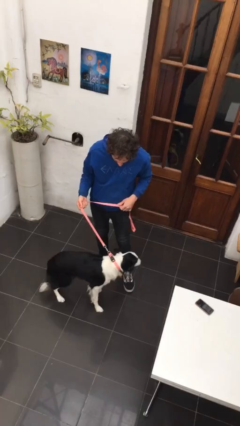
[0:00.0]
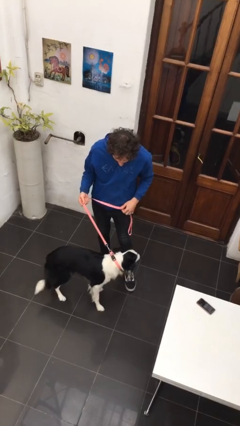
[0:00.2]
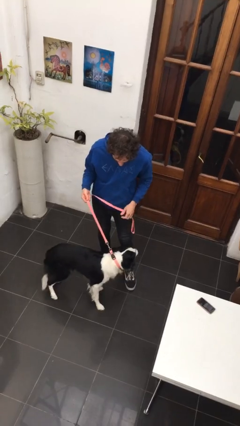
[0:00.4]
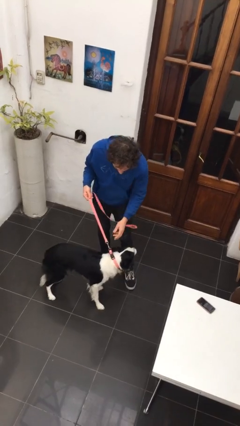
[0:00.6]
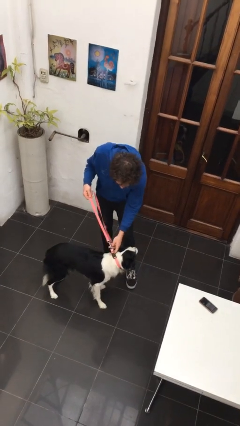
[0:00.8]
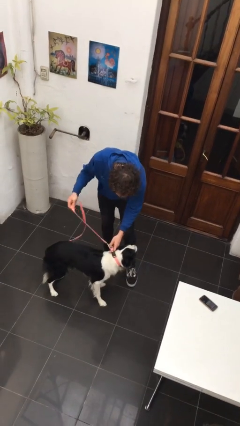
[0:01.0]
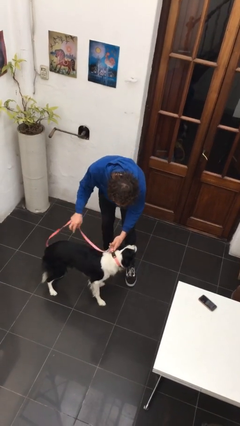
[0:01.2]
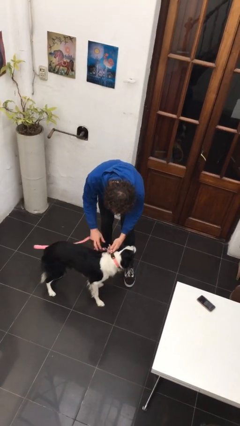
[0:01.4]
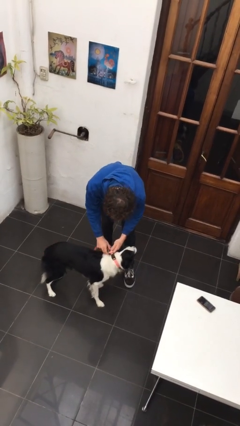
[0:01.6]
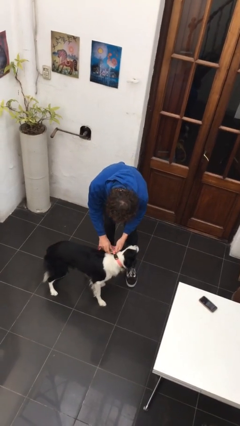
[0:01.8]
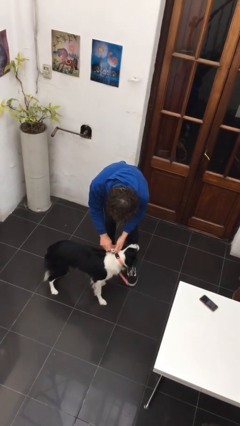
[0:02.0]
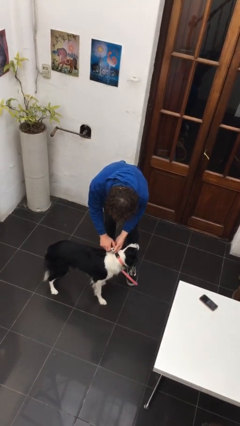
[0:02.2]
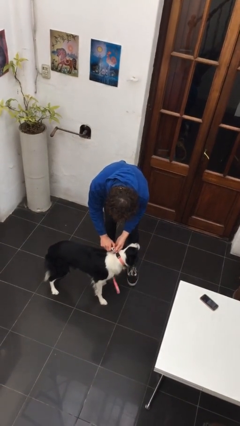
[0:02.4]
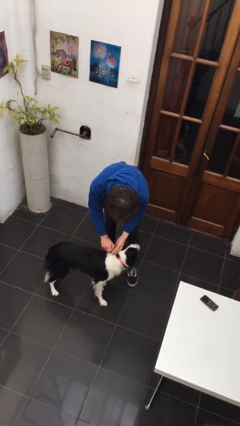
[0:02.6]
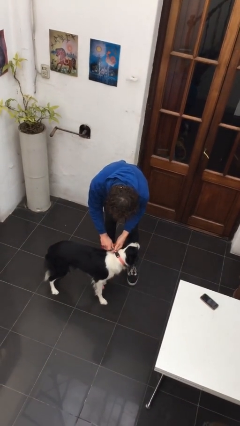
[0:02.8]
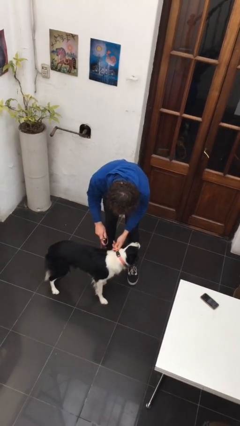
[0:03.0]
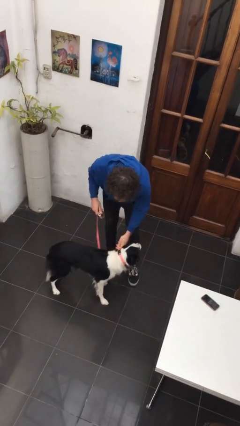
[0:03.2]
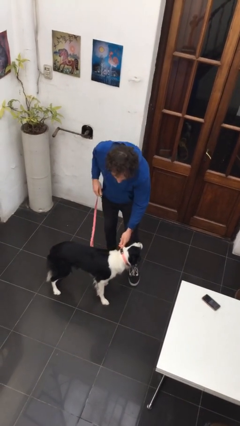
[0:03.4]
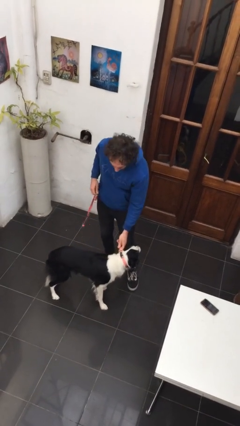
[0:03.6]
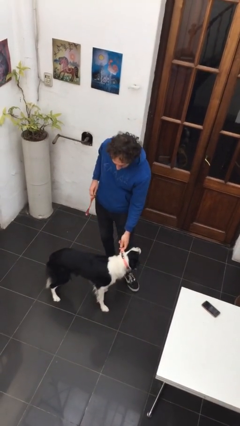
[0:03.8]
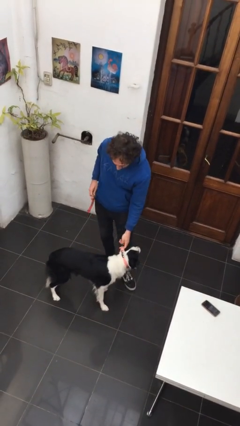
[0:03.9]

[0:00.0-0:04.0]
person unattaches leash from dog

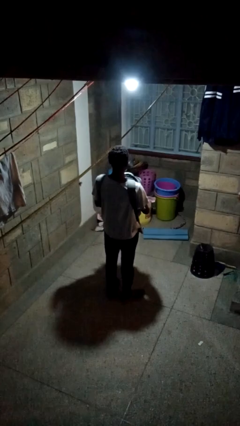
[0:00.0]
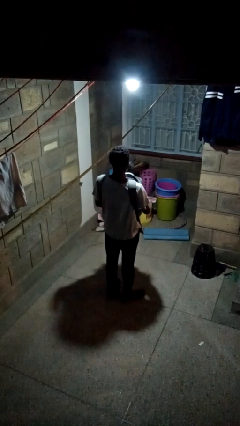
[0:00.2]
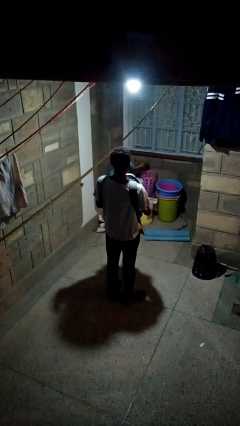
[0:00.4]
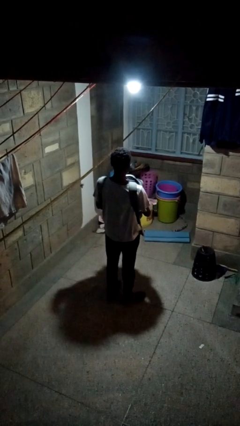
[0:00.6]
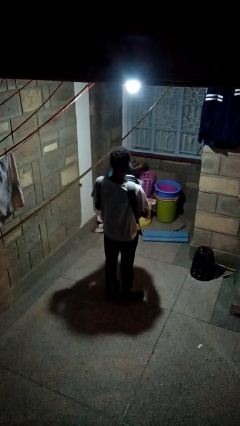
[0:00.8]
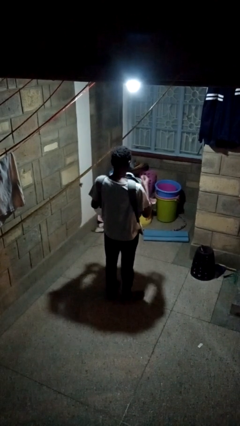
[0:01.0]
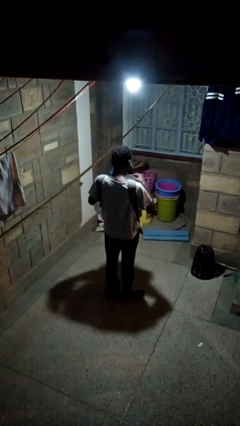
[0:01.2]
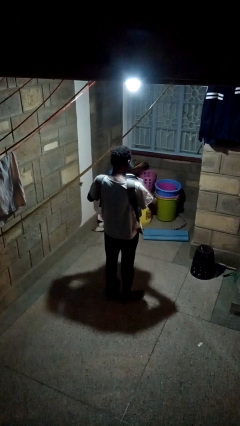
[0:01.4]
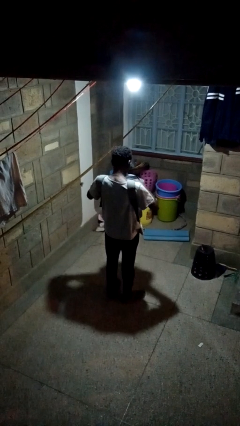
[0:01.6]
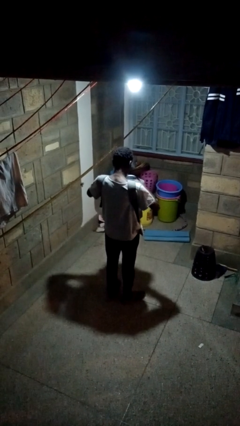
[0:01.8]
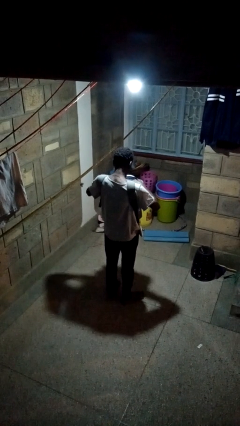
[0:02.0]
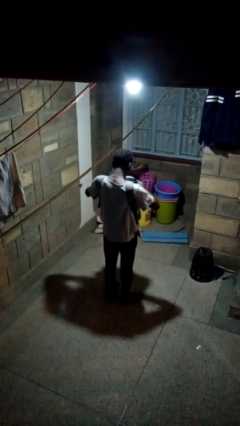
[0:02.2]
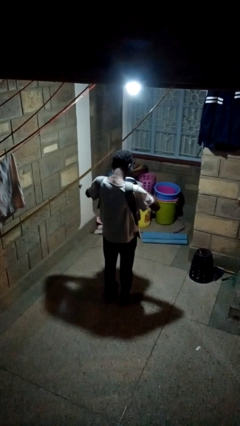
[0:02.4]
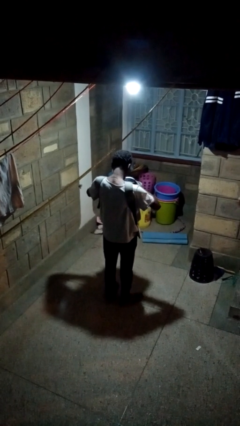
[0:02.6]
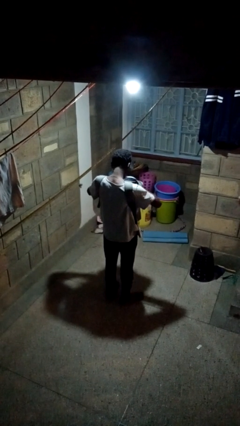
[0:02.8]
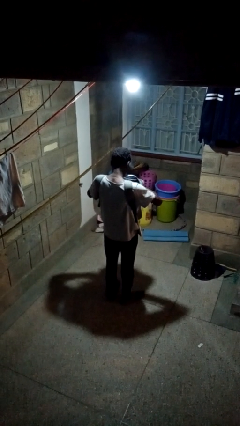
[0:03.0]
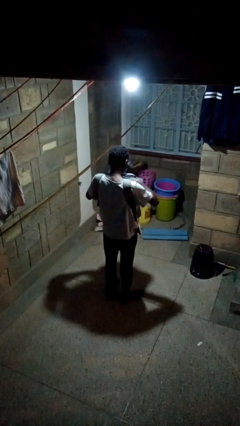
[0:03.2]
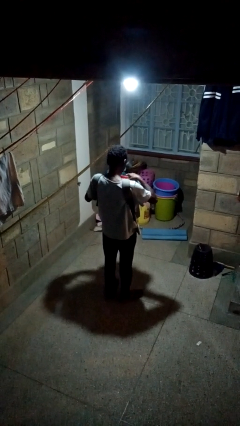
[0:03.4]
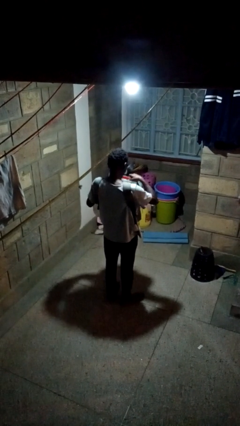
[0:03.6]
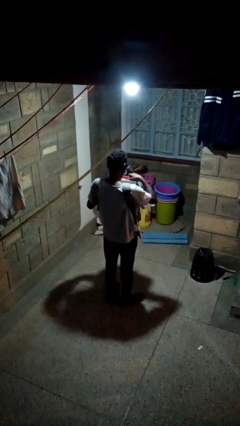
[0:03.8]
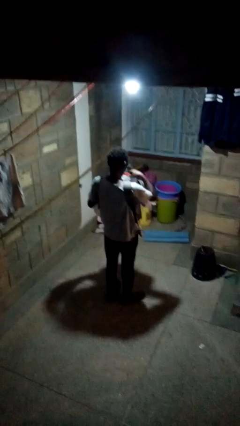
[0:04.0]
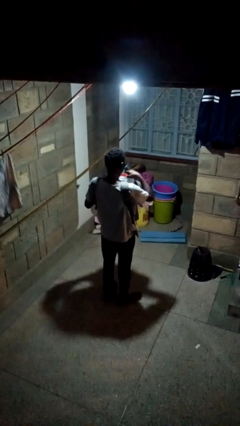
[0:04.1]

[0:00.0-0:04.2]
person searches in backpack

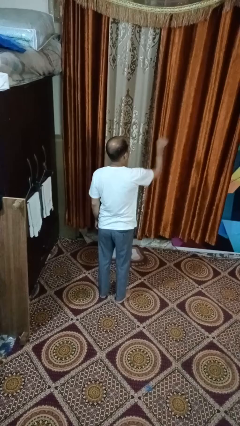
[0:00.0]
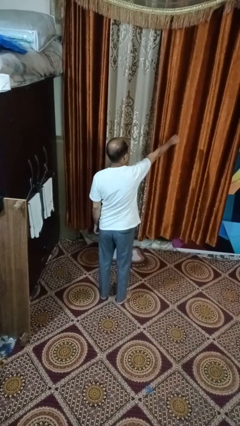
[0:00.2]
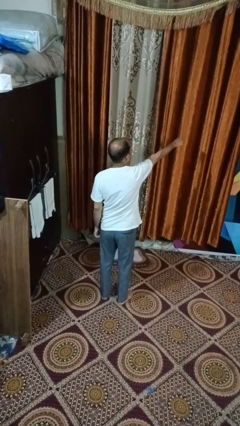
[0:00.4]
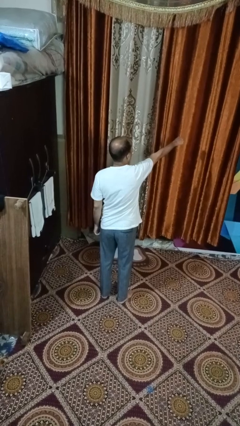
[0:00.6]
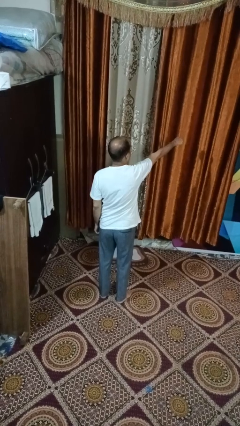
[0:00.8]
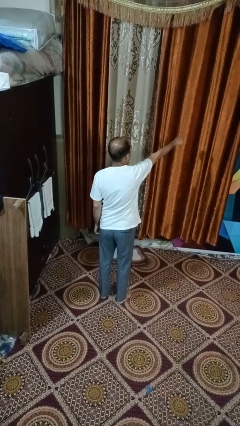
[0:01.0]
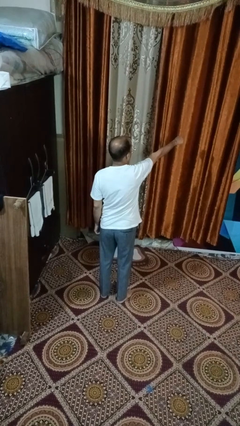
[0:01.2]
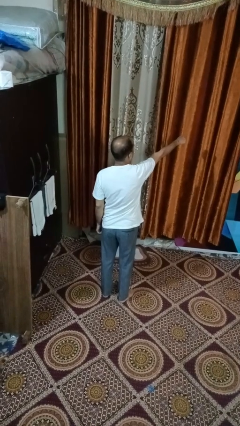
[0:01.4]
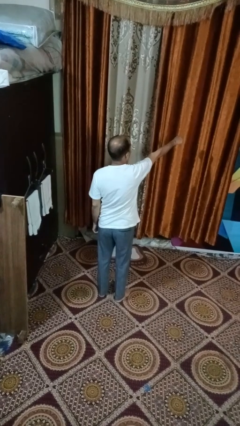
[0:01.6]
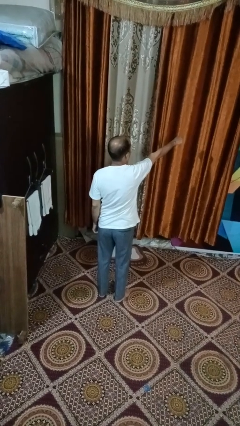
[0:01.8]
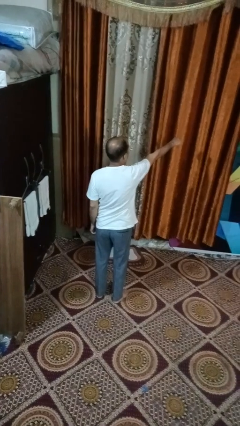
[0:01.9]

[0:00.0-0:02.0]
person punches

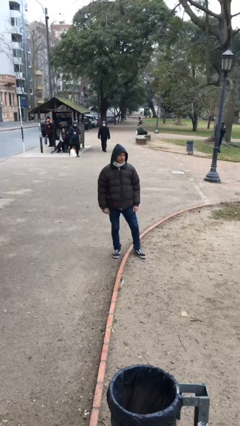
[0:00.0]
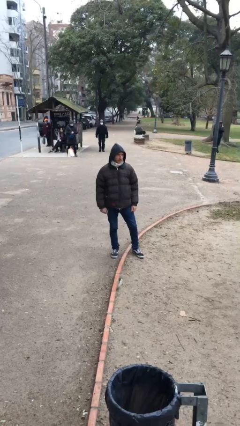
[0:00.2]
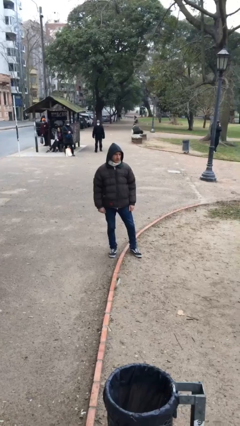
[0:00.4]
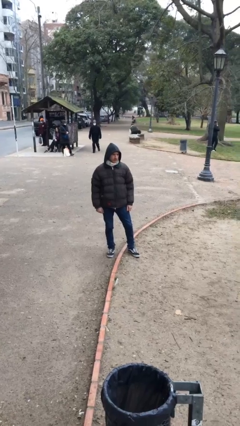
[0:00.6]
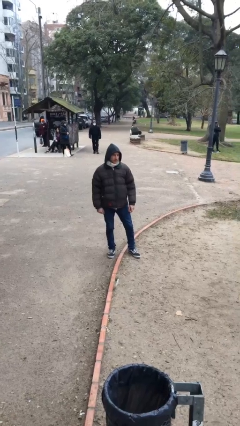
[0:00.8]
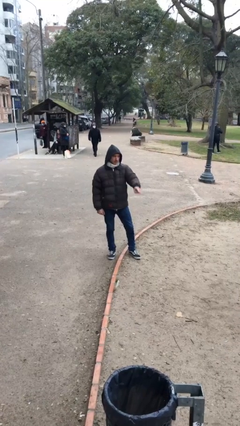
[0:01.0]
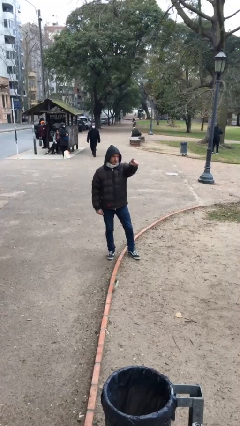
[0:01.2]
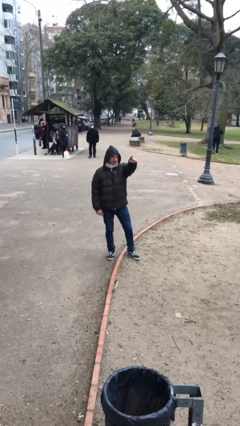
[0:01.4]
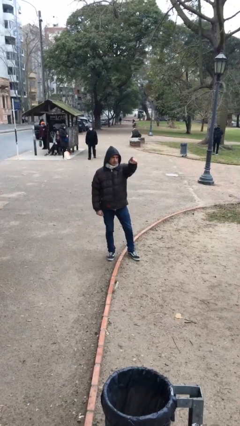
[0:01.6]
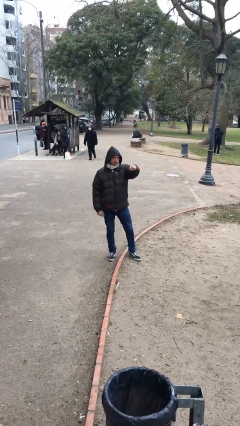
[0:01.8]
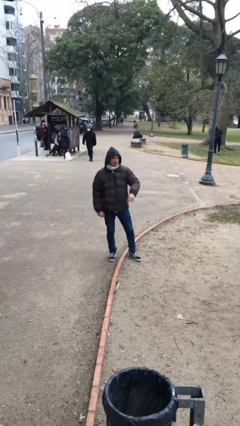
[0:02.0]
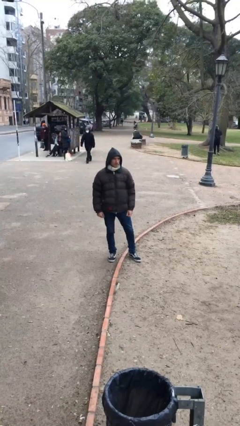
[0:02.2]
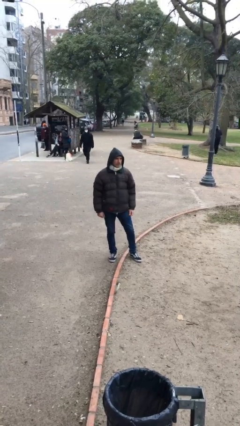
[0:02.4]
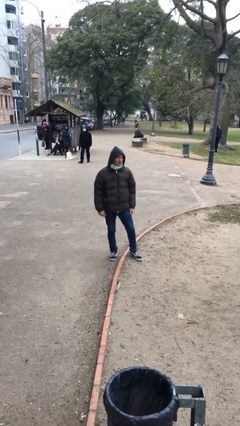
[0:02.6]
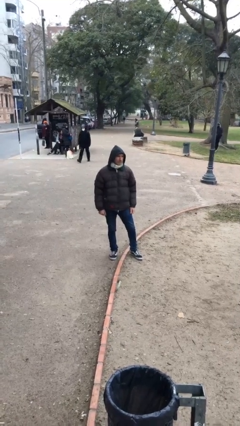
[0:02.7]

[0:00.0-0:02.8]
person points at person

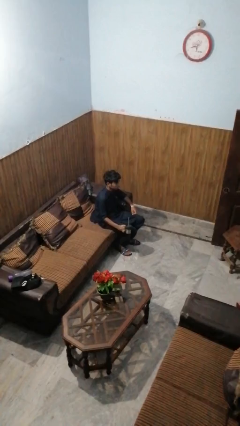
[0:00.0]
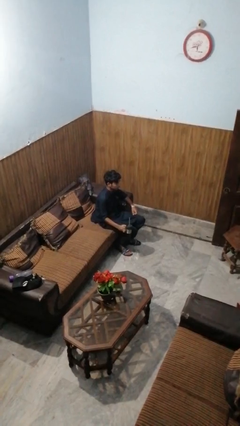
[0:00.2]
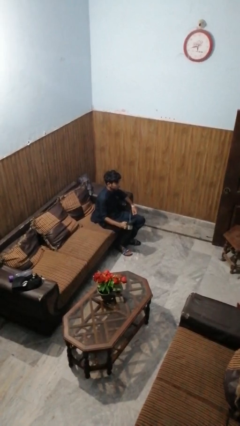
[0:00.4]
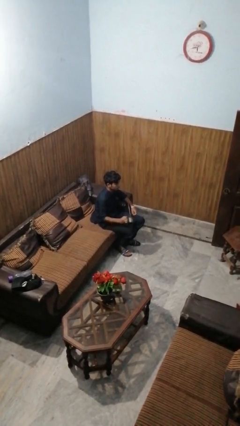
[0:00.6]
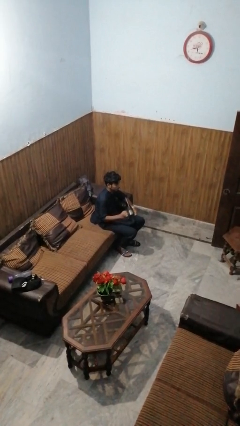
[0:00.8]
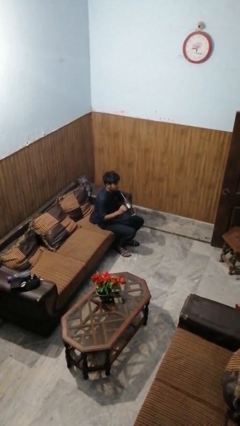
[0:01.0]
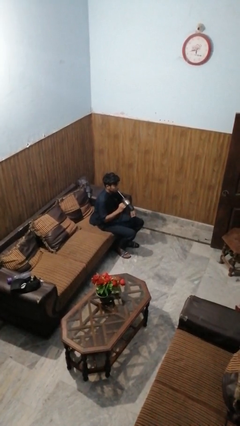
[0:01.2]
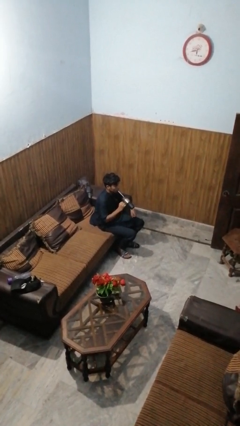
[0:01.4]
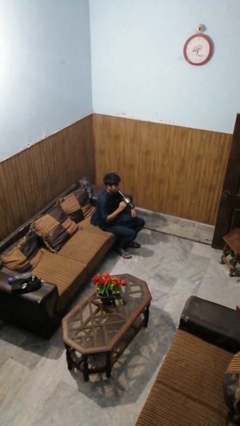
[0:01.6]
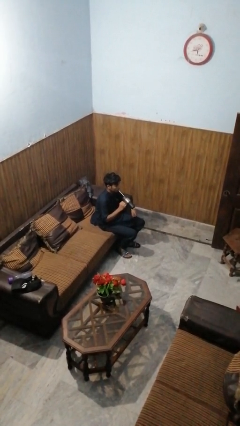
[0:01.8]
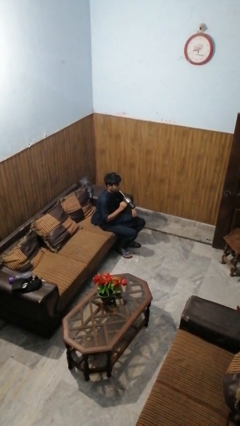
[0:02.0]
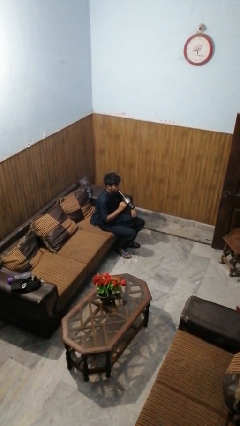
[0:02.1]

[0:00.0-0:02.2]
person drinks from straw

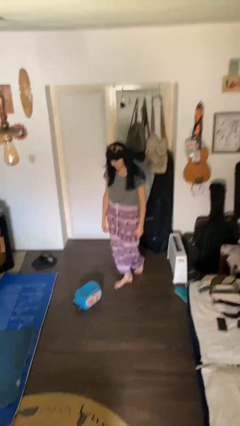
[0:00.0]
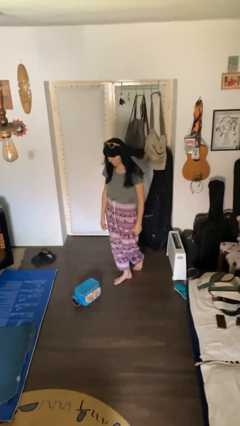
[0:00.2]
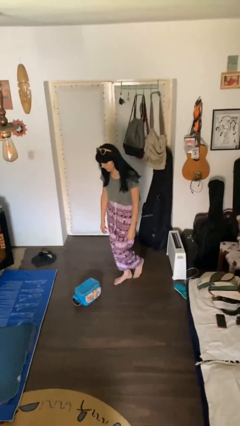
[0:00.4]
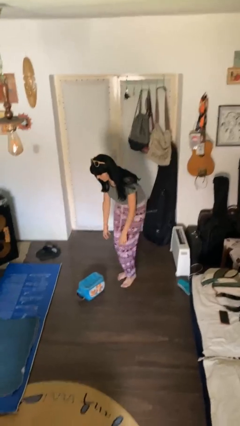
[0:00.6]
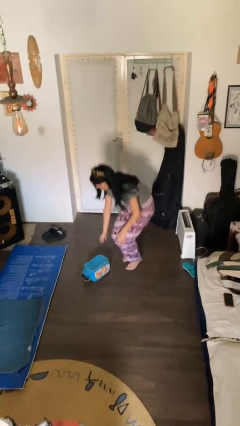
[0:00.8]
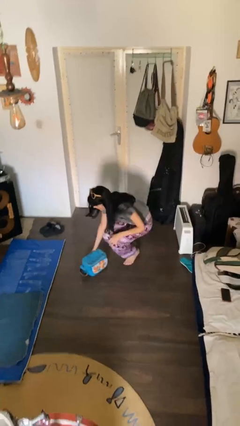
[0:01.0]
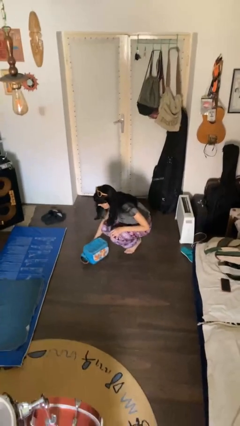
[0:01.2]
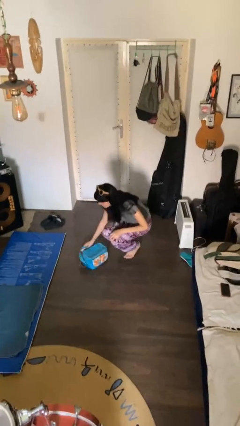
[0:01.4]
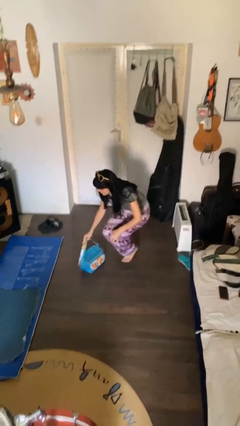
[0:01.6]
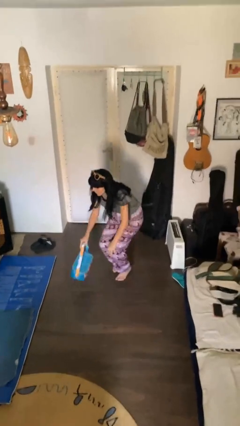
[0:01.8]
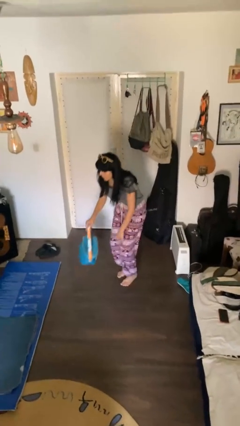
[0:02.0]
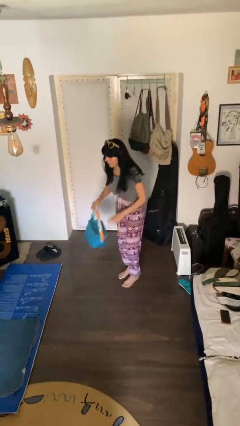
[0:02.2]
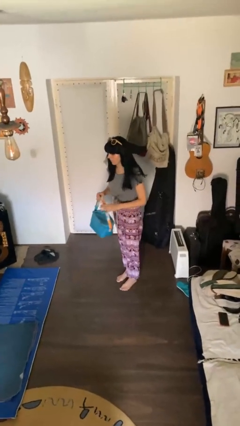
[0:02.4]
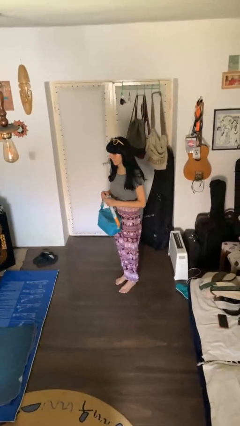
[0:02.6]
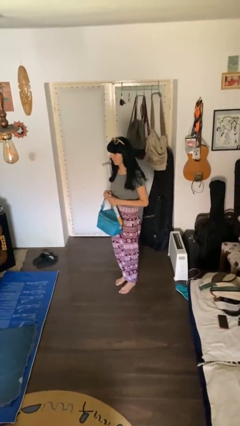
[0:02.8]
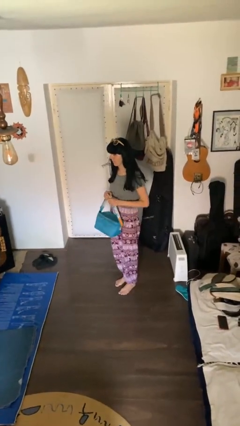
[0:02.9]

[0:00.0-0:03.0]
person picks up object from floor
